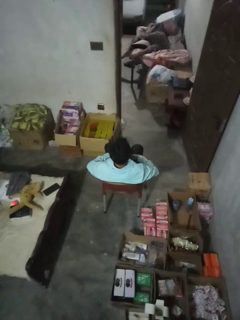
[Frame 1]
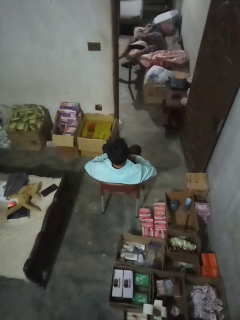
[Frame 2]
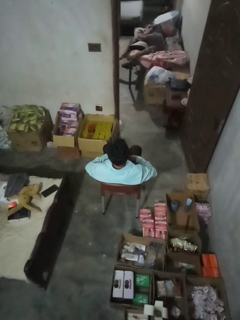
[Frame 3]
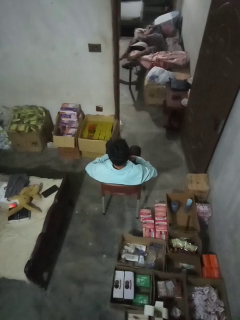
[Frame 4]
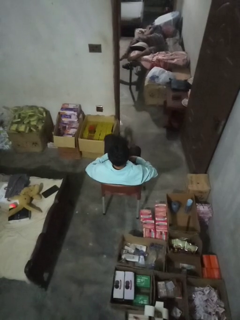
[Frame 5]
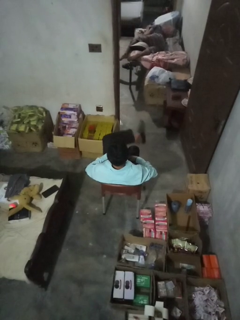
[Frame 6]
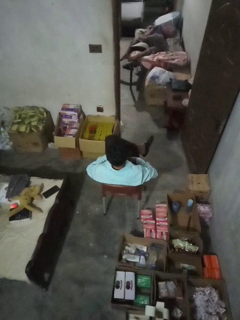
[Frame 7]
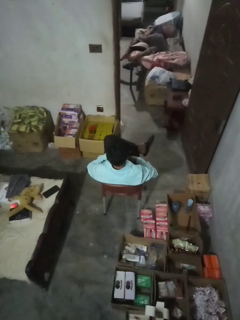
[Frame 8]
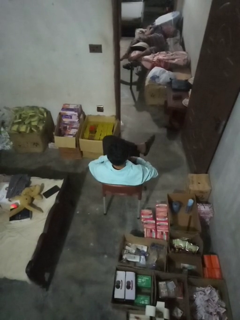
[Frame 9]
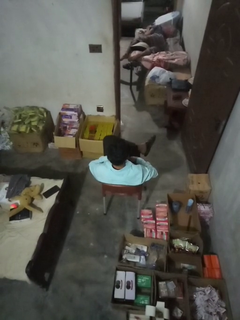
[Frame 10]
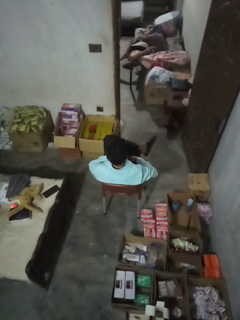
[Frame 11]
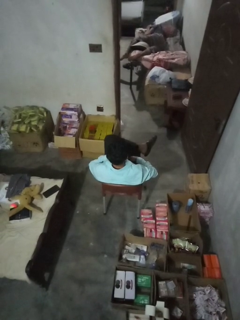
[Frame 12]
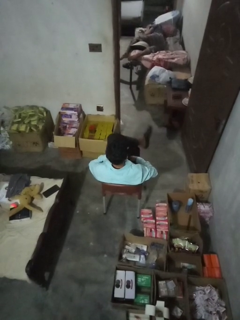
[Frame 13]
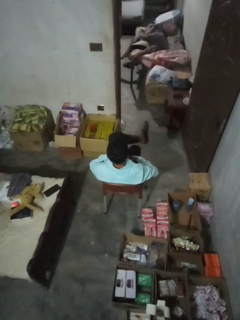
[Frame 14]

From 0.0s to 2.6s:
person crosses legs

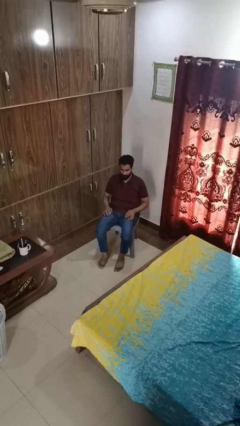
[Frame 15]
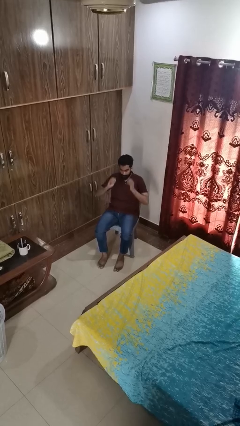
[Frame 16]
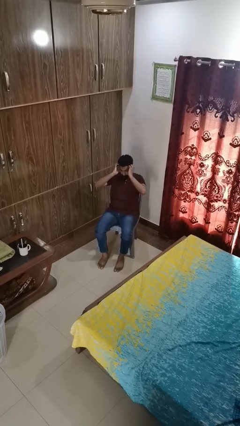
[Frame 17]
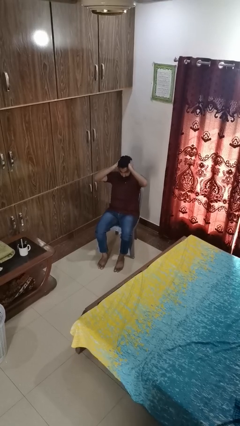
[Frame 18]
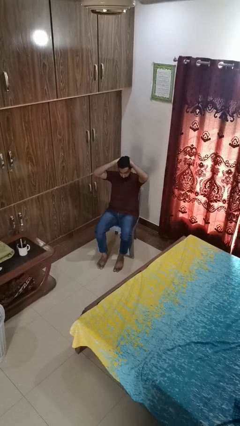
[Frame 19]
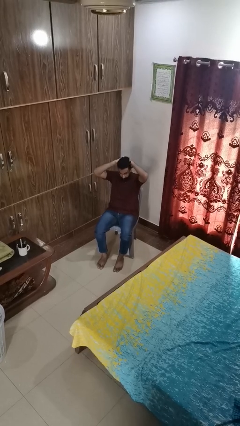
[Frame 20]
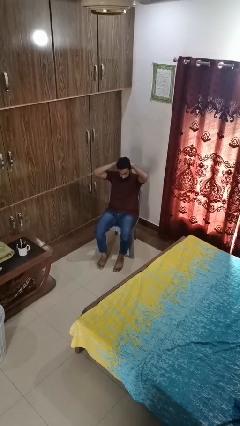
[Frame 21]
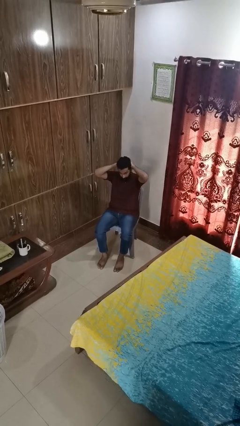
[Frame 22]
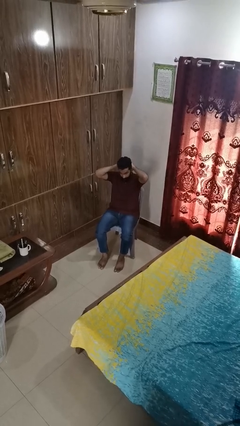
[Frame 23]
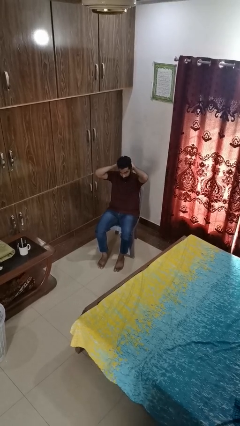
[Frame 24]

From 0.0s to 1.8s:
person strokes hair

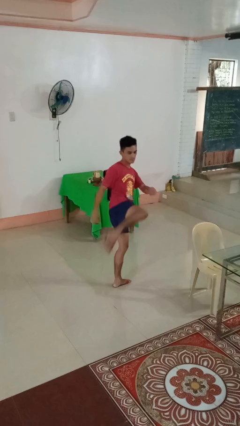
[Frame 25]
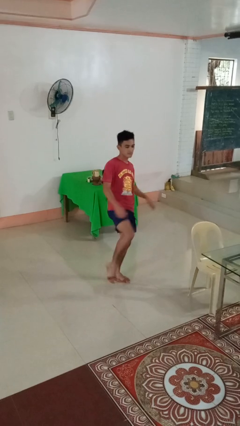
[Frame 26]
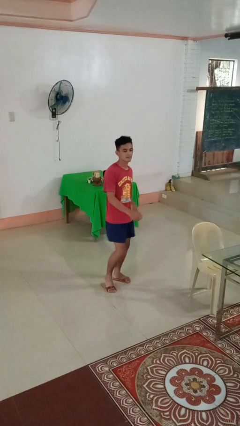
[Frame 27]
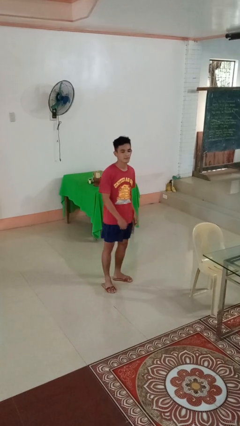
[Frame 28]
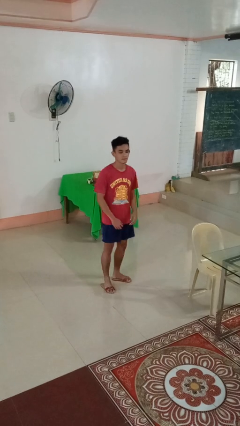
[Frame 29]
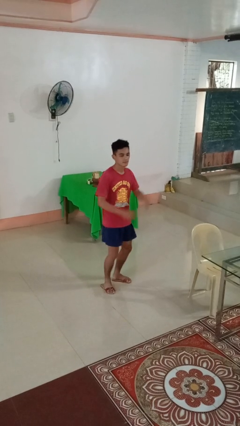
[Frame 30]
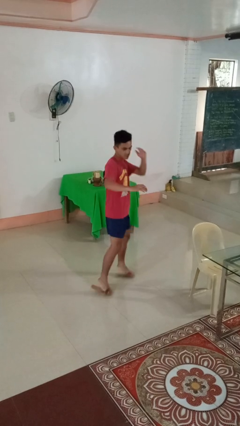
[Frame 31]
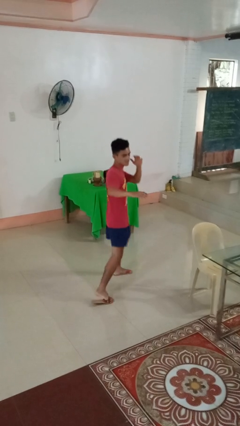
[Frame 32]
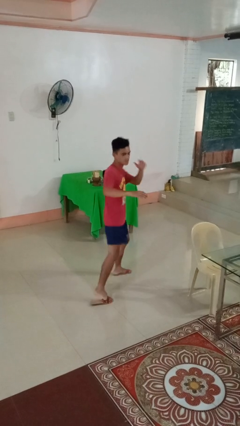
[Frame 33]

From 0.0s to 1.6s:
person karate kicks

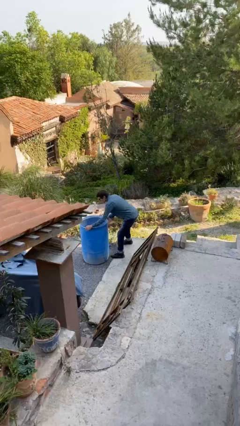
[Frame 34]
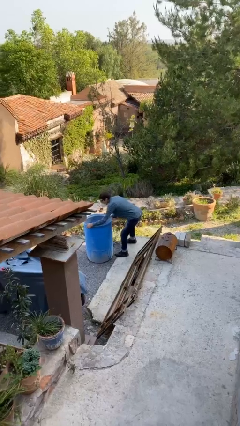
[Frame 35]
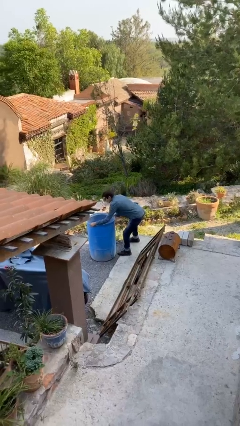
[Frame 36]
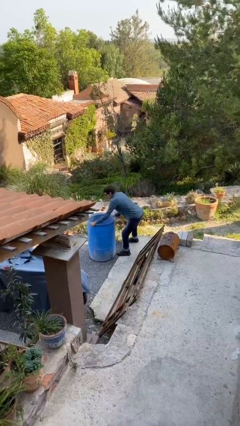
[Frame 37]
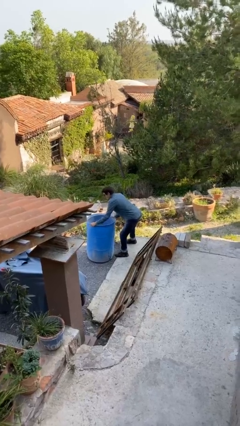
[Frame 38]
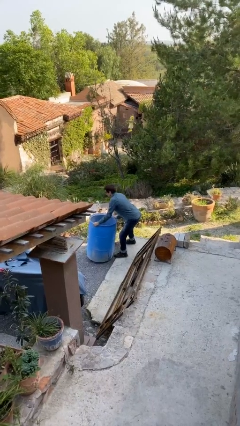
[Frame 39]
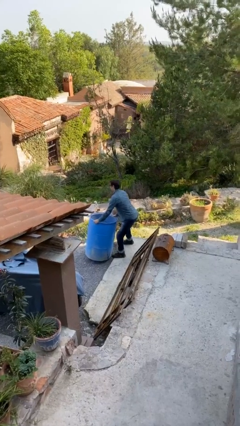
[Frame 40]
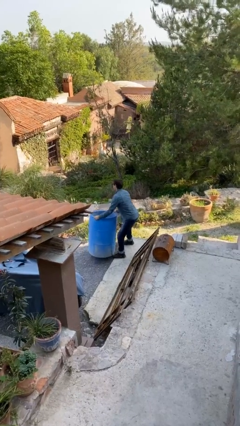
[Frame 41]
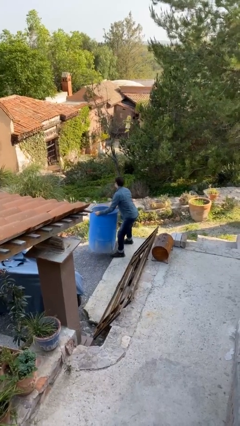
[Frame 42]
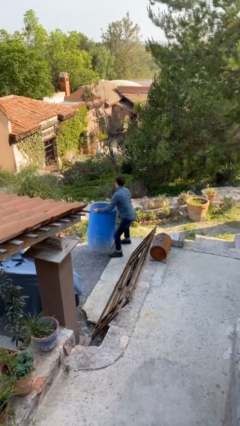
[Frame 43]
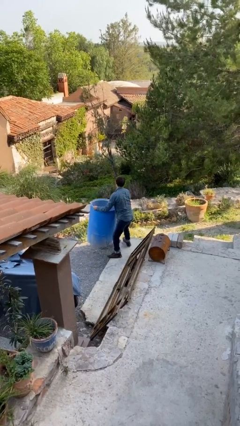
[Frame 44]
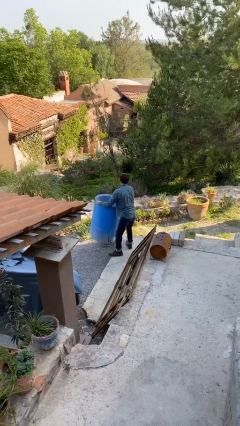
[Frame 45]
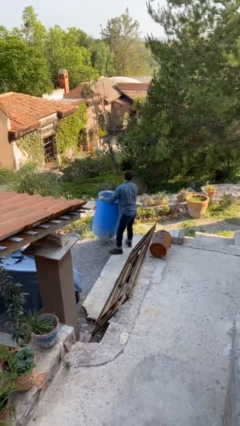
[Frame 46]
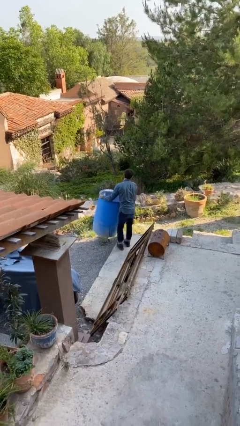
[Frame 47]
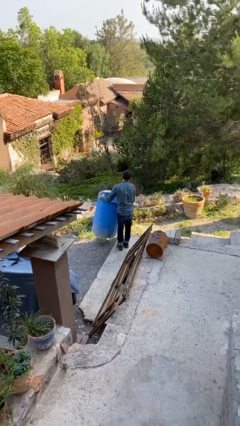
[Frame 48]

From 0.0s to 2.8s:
person picks up object from floor

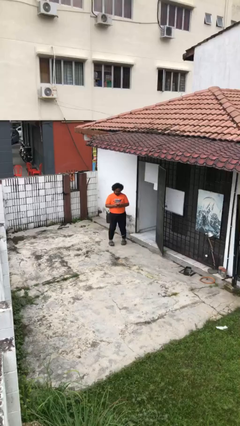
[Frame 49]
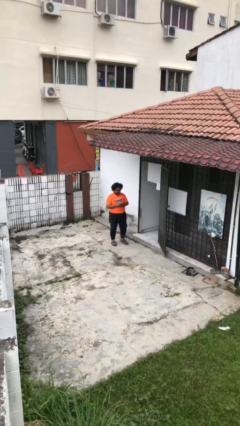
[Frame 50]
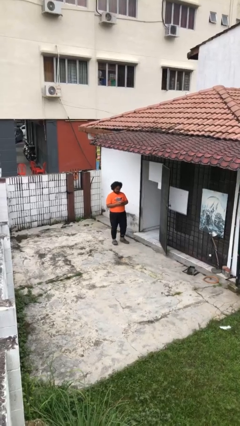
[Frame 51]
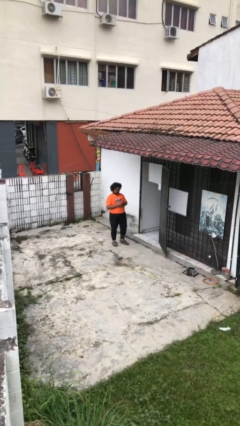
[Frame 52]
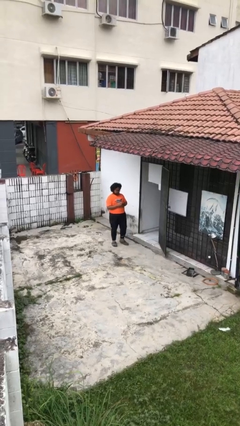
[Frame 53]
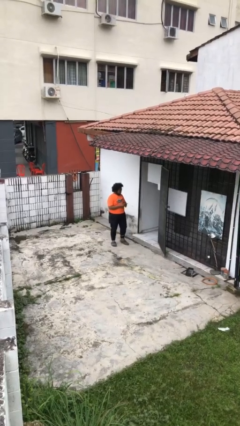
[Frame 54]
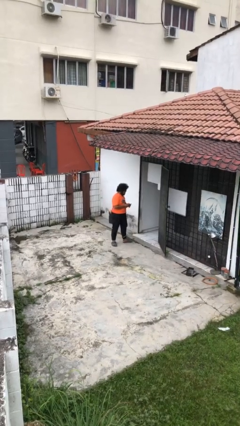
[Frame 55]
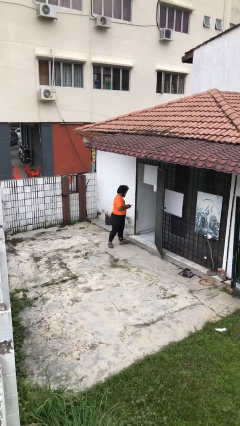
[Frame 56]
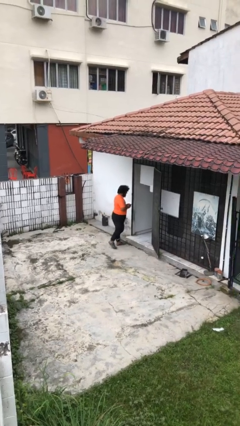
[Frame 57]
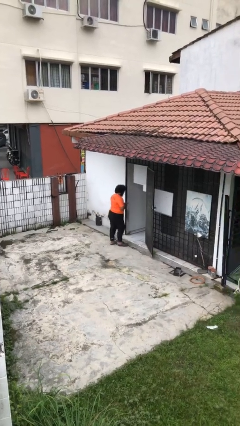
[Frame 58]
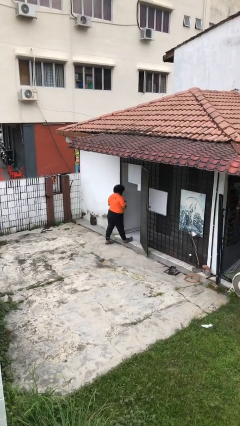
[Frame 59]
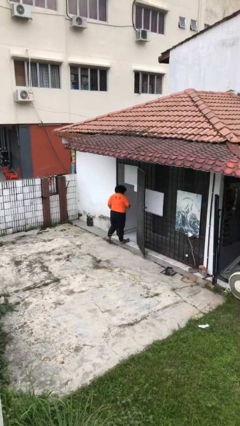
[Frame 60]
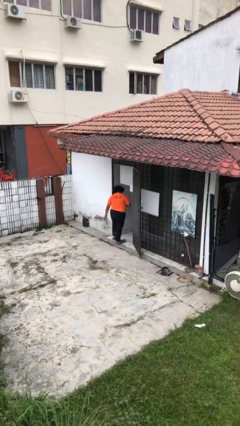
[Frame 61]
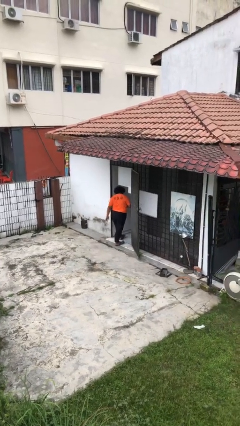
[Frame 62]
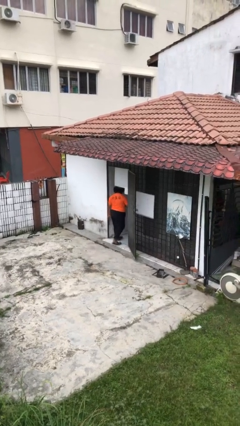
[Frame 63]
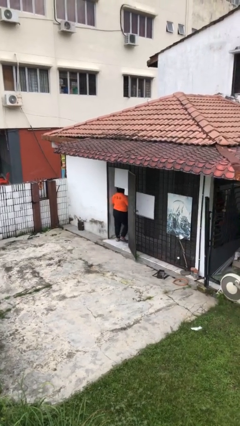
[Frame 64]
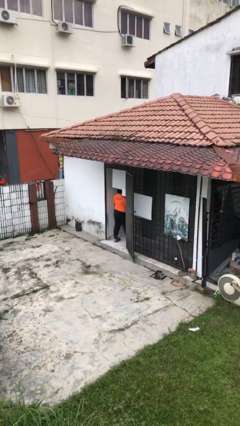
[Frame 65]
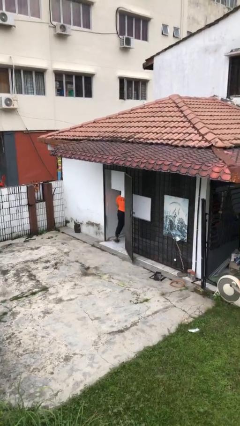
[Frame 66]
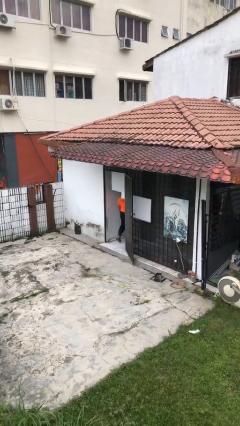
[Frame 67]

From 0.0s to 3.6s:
person exits scene through structure

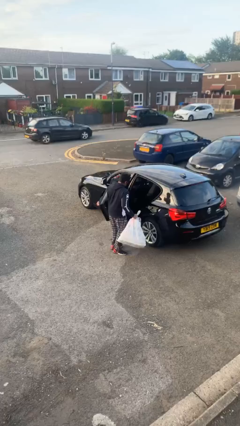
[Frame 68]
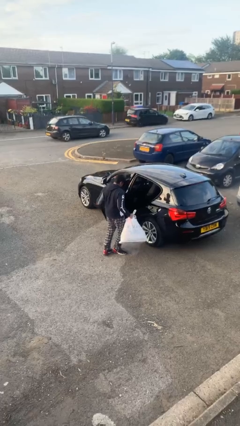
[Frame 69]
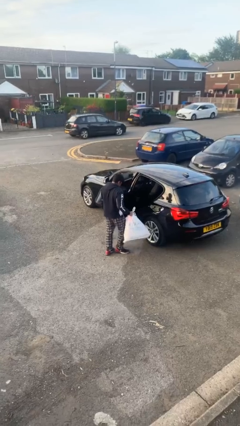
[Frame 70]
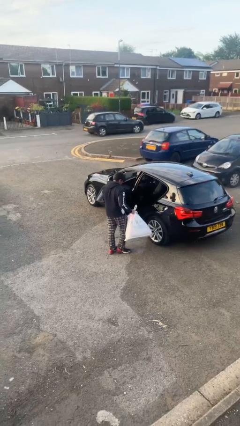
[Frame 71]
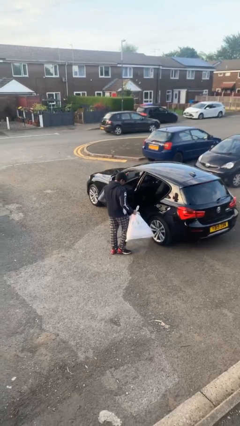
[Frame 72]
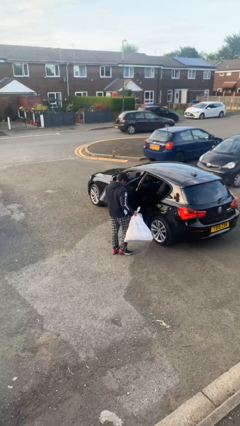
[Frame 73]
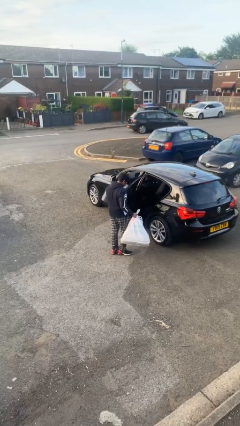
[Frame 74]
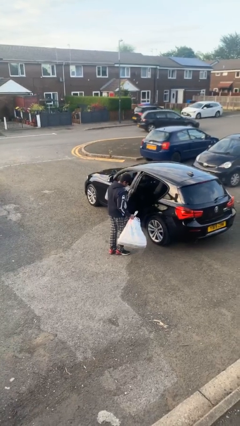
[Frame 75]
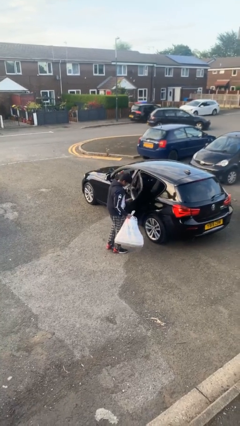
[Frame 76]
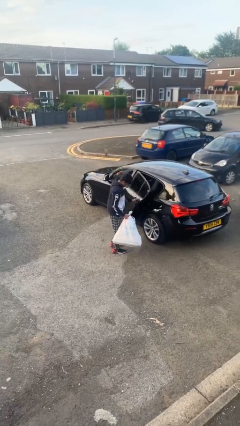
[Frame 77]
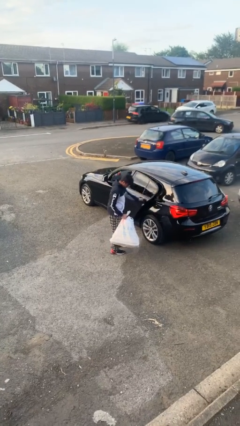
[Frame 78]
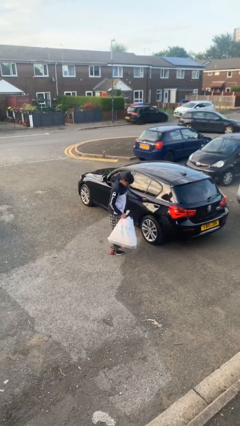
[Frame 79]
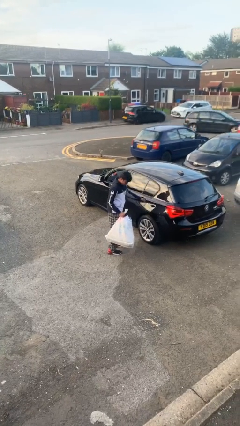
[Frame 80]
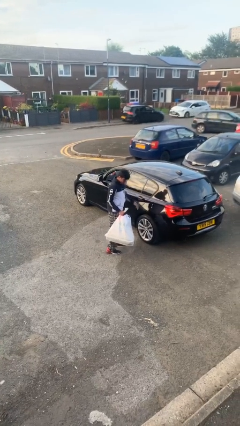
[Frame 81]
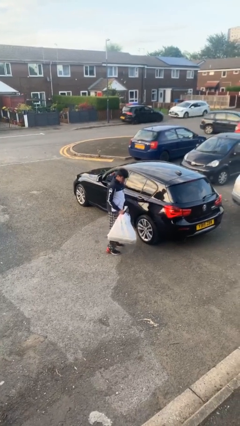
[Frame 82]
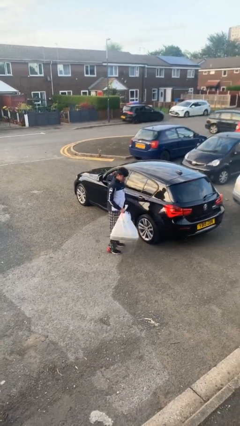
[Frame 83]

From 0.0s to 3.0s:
person closes car door

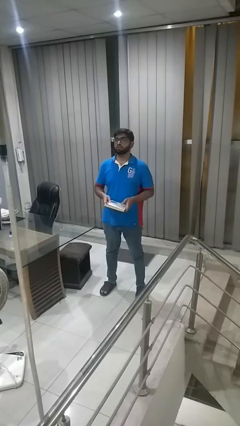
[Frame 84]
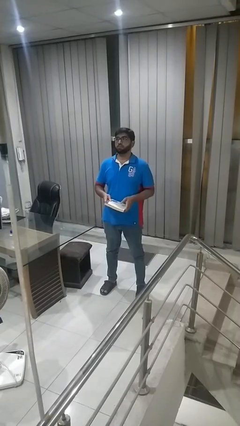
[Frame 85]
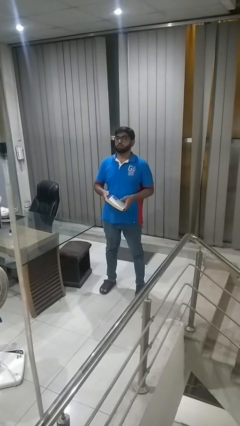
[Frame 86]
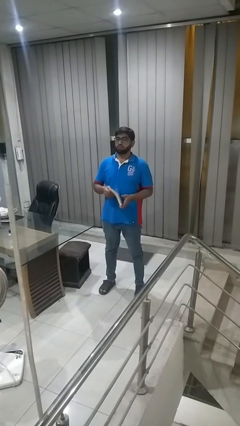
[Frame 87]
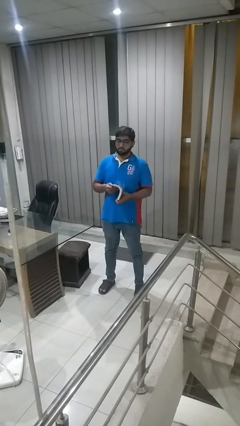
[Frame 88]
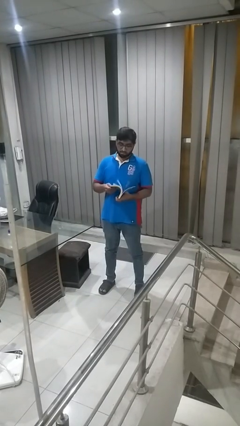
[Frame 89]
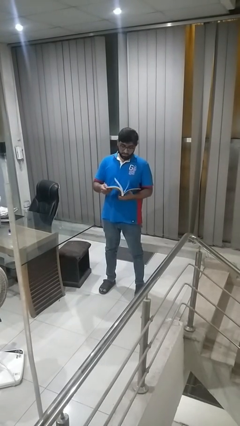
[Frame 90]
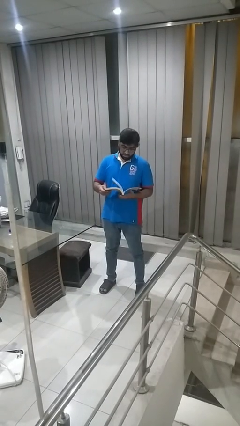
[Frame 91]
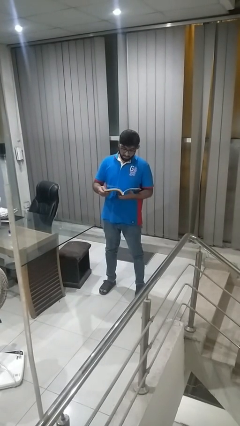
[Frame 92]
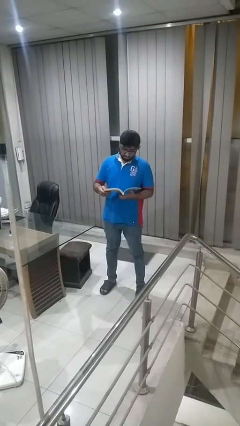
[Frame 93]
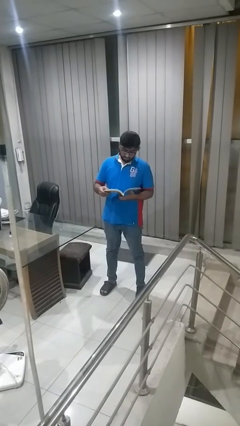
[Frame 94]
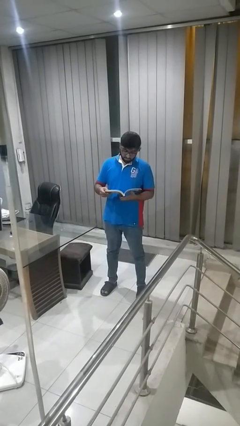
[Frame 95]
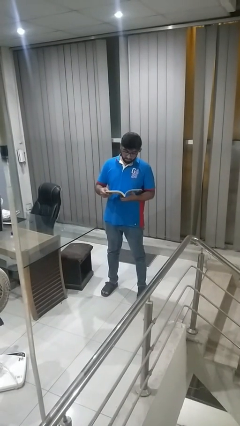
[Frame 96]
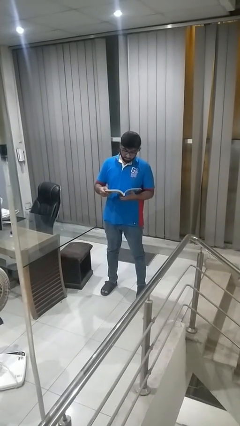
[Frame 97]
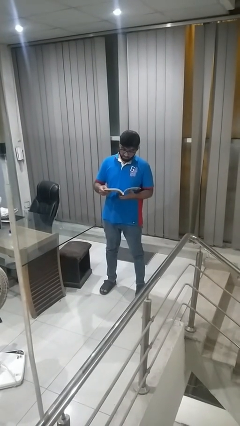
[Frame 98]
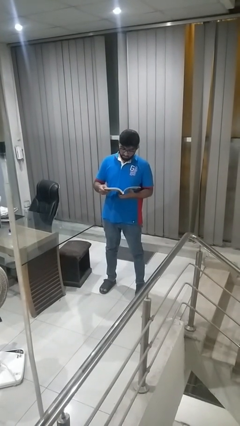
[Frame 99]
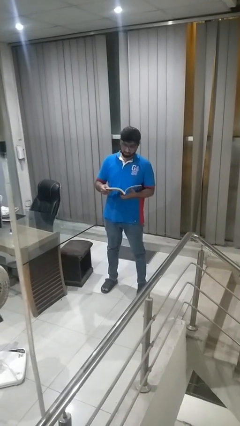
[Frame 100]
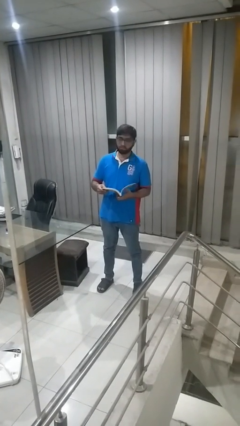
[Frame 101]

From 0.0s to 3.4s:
person reads book
